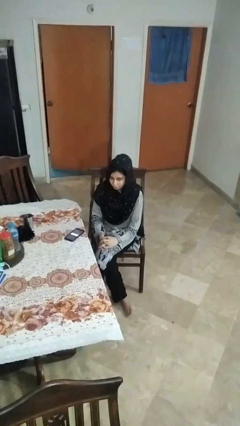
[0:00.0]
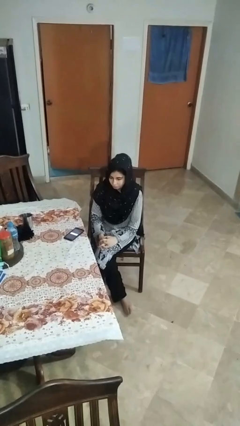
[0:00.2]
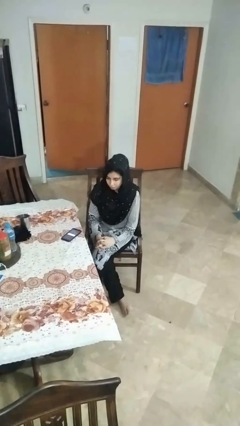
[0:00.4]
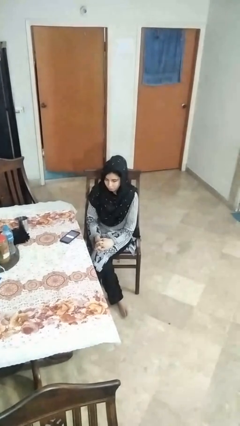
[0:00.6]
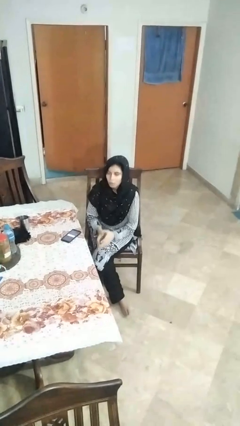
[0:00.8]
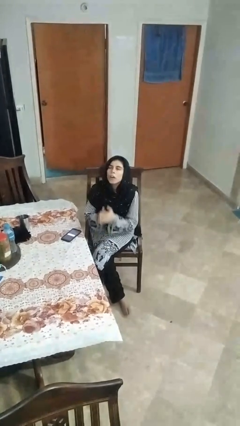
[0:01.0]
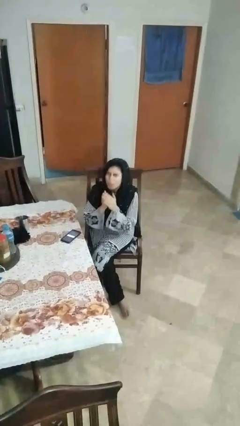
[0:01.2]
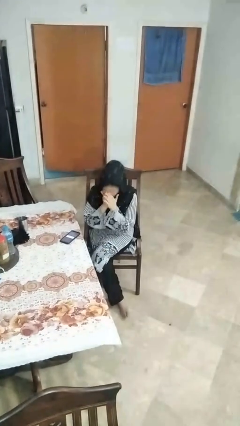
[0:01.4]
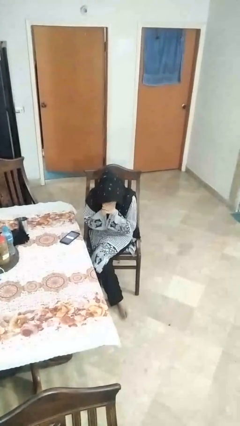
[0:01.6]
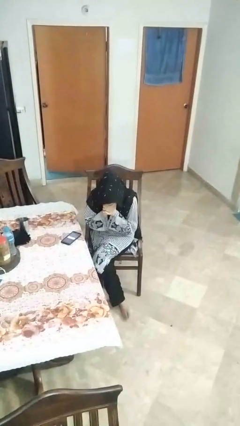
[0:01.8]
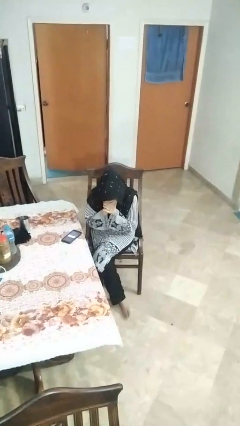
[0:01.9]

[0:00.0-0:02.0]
person sneezes into hand

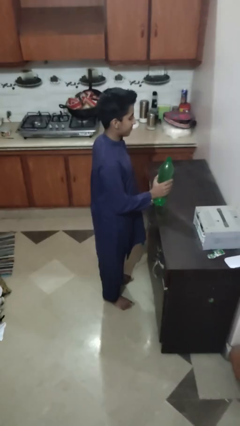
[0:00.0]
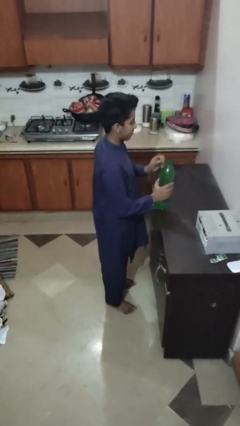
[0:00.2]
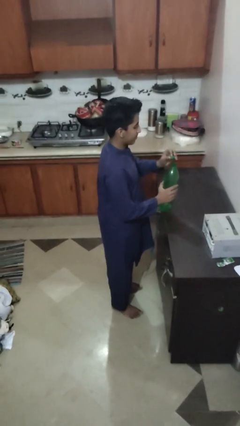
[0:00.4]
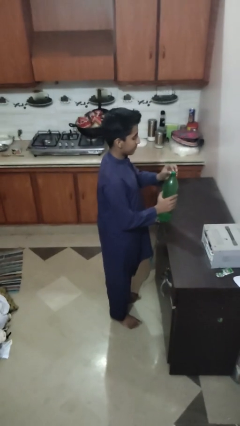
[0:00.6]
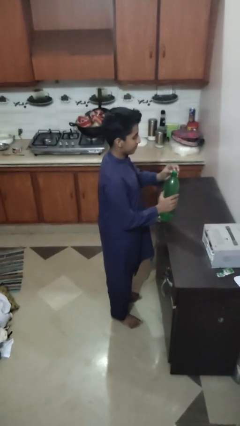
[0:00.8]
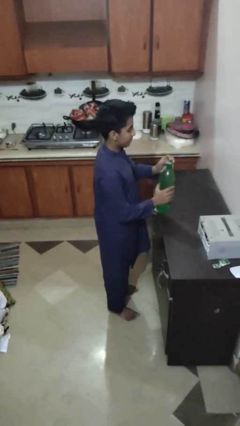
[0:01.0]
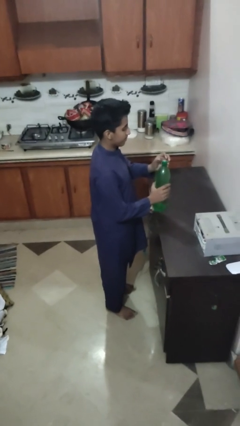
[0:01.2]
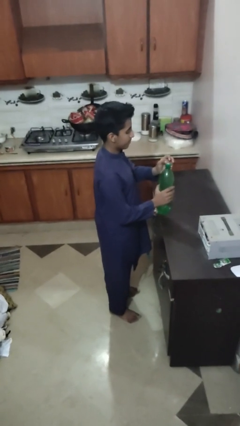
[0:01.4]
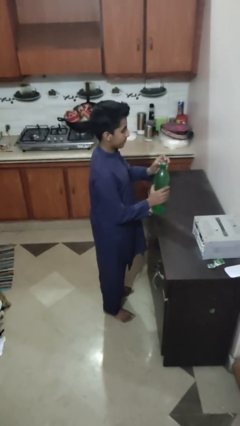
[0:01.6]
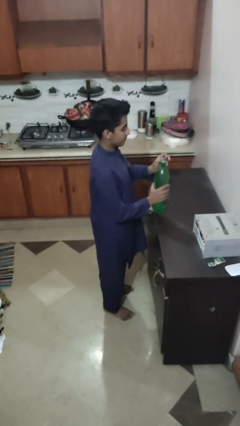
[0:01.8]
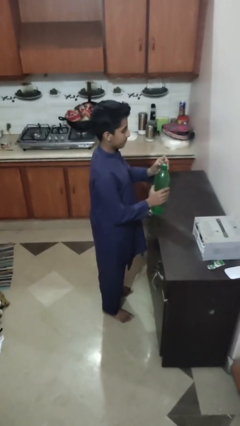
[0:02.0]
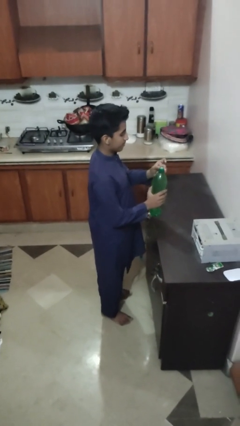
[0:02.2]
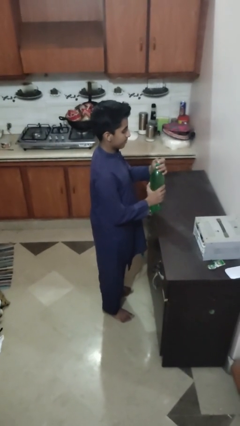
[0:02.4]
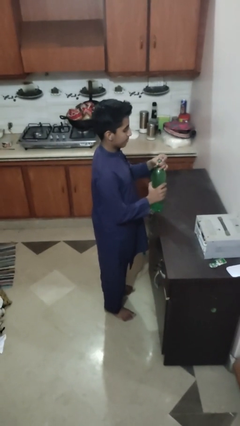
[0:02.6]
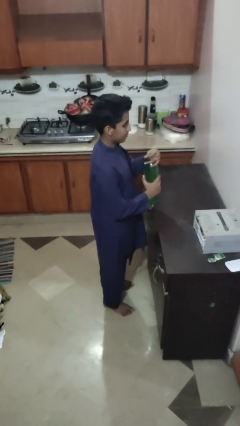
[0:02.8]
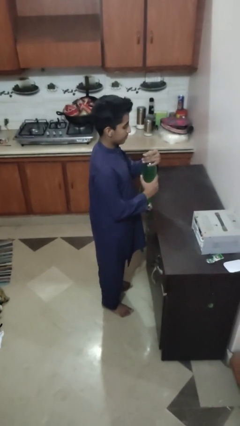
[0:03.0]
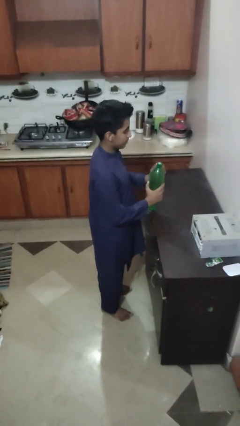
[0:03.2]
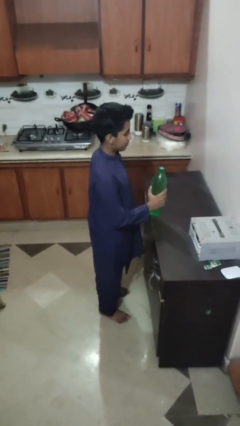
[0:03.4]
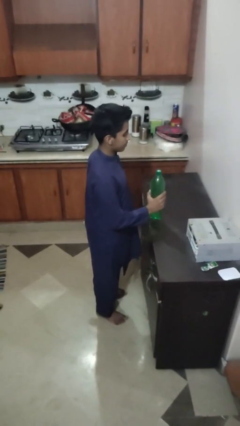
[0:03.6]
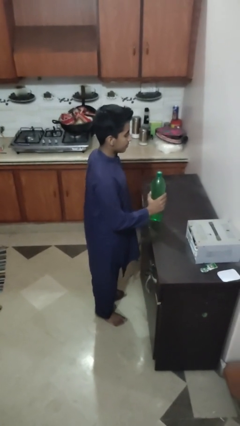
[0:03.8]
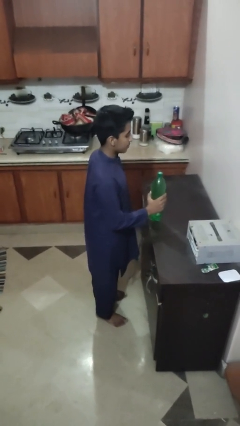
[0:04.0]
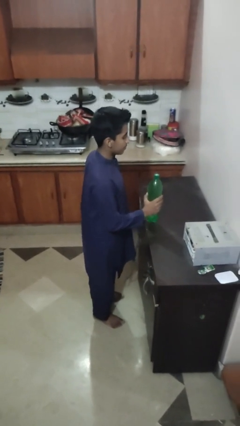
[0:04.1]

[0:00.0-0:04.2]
person screws lid to bottle

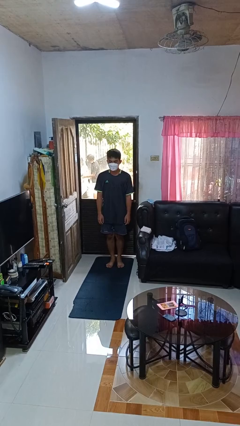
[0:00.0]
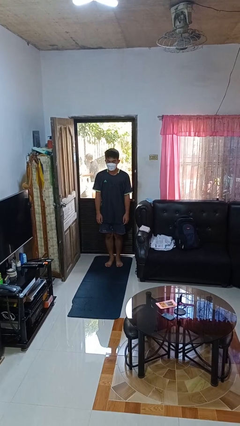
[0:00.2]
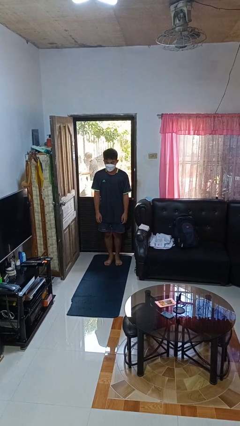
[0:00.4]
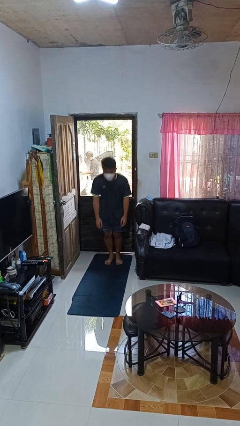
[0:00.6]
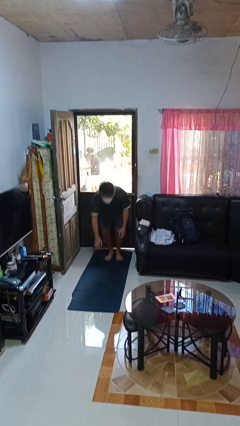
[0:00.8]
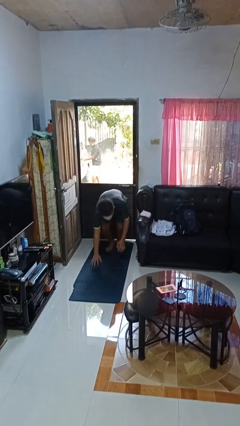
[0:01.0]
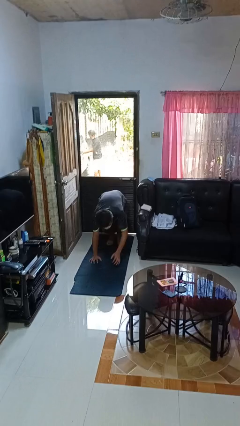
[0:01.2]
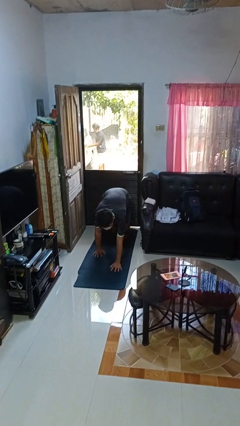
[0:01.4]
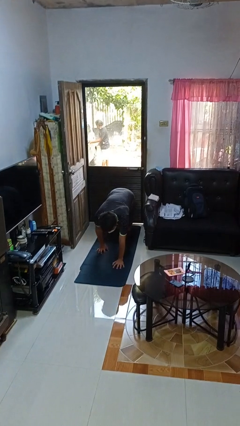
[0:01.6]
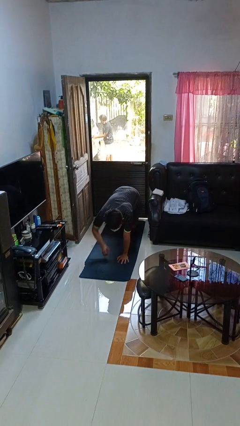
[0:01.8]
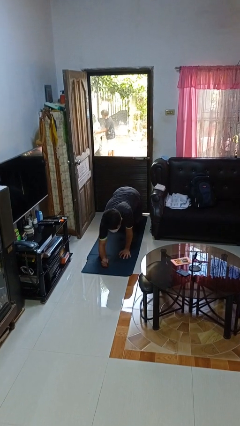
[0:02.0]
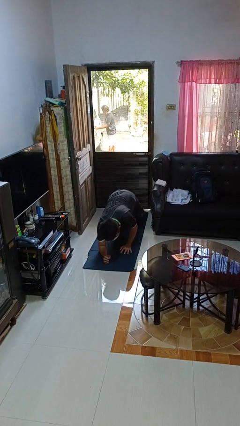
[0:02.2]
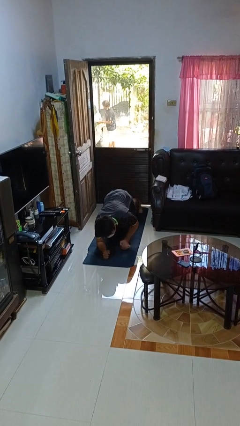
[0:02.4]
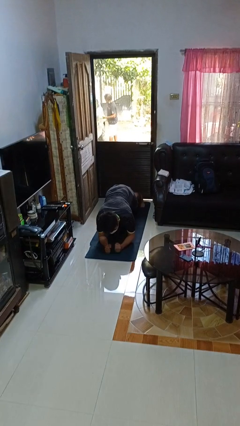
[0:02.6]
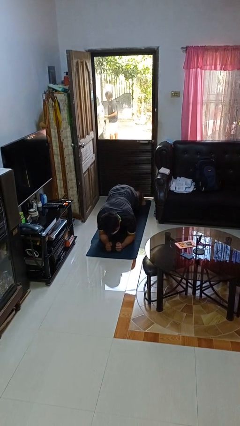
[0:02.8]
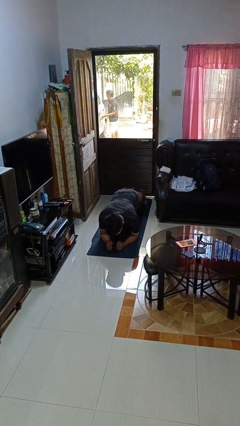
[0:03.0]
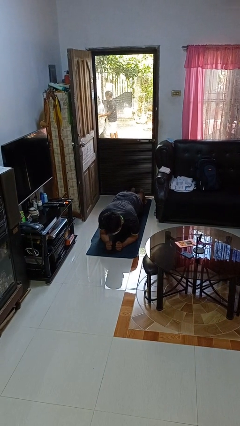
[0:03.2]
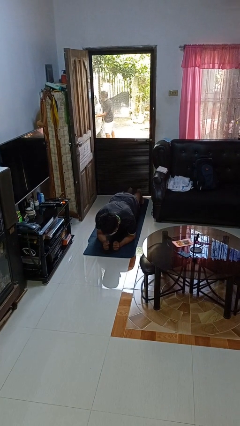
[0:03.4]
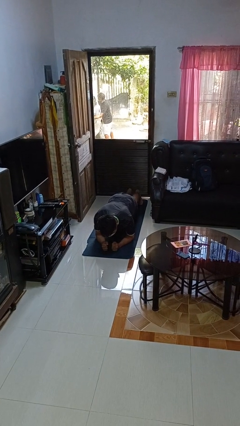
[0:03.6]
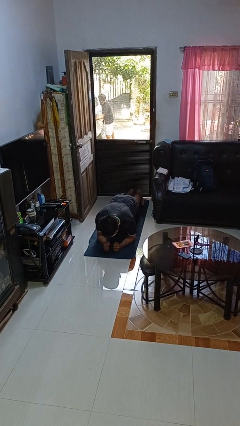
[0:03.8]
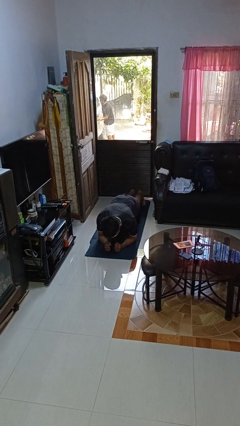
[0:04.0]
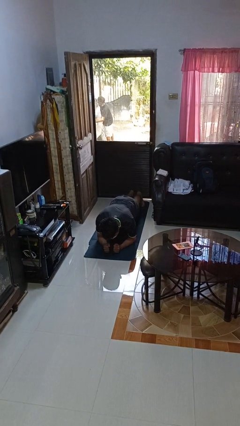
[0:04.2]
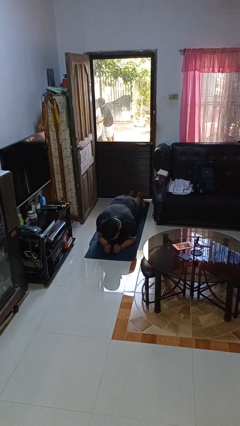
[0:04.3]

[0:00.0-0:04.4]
person exercises with plank

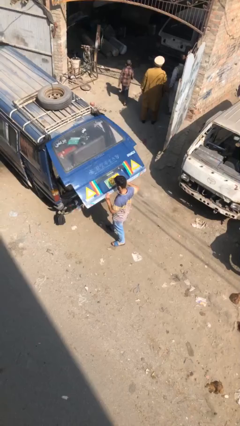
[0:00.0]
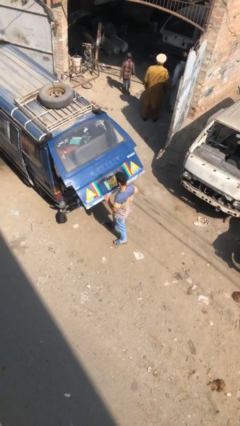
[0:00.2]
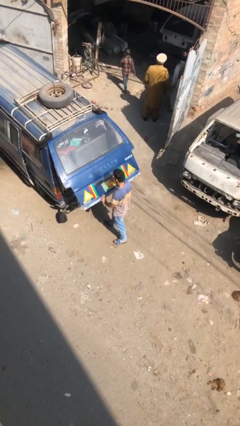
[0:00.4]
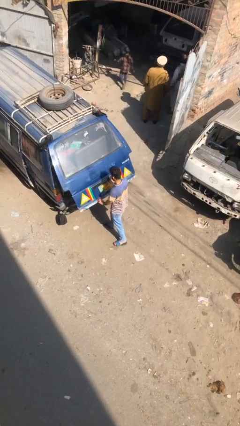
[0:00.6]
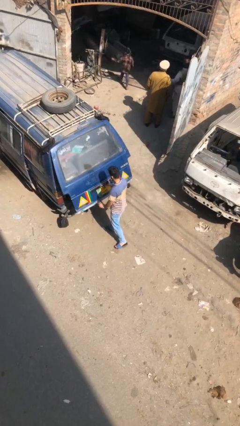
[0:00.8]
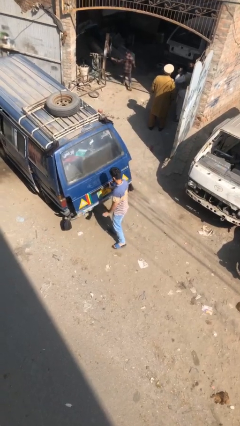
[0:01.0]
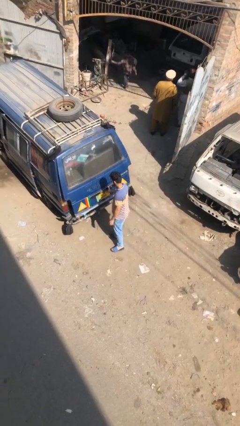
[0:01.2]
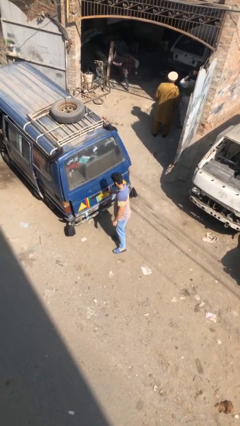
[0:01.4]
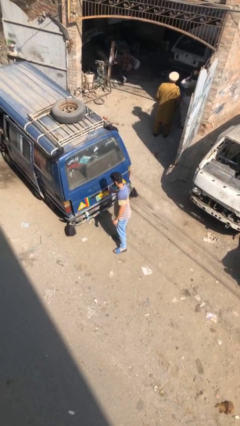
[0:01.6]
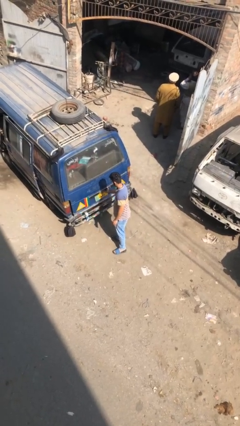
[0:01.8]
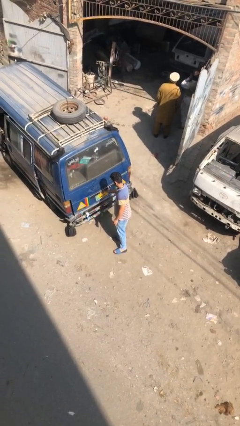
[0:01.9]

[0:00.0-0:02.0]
person closes car trunk

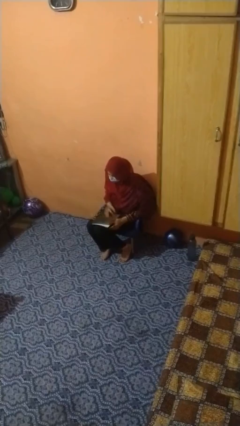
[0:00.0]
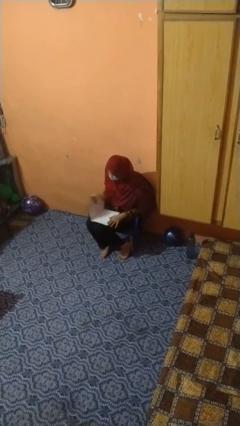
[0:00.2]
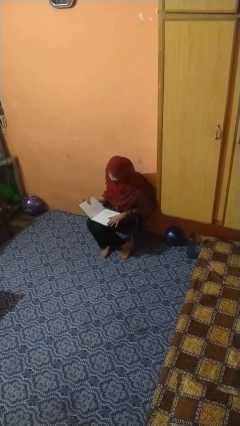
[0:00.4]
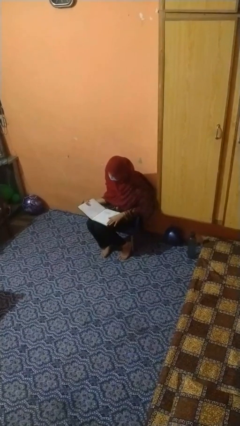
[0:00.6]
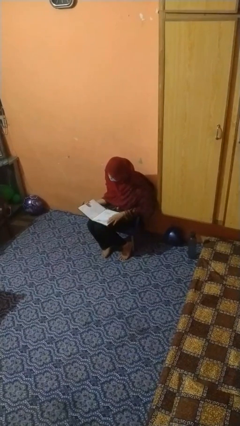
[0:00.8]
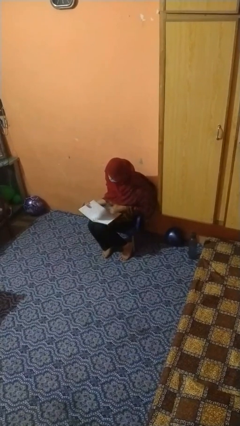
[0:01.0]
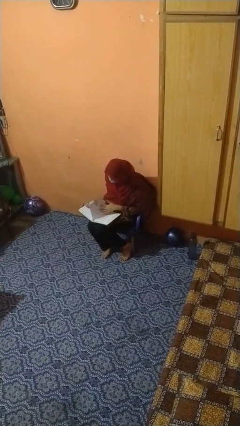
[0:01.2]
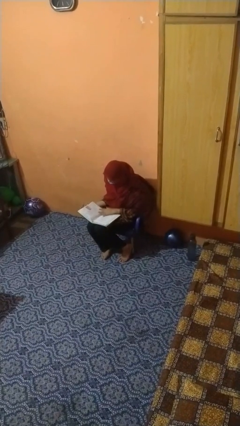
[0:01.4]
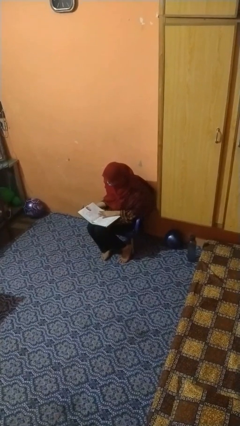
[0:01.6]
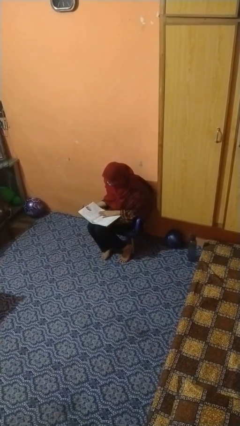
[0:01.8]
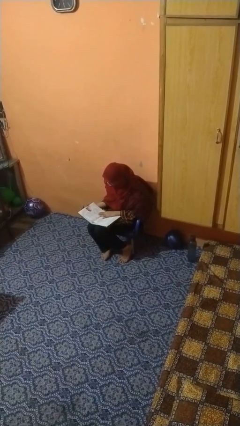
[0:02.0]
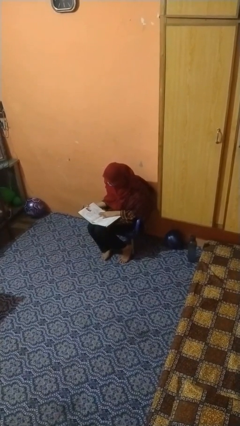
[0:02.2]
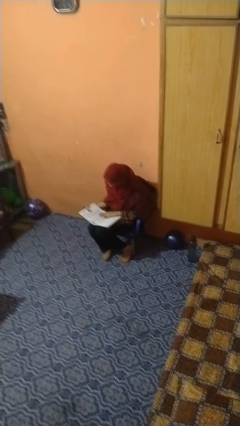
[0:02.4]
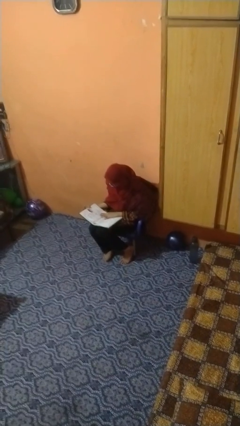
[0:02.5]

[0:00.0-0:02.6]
person reads book

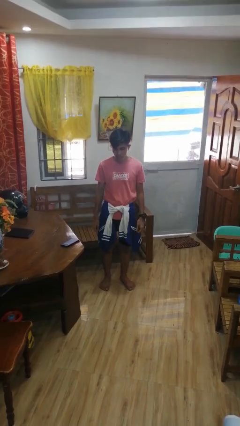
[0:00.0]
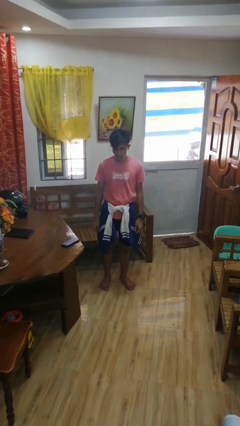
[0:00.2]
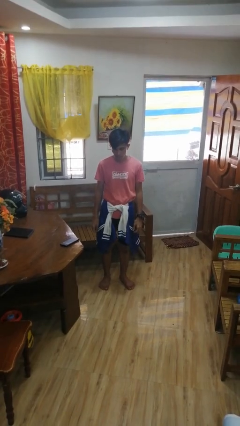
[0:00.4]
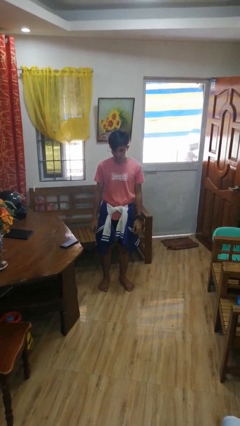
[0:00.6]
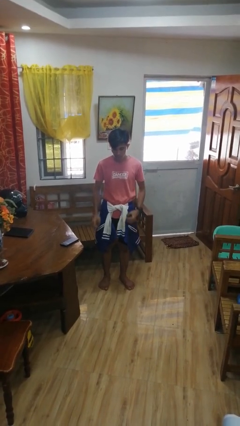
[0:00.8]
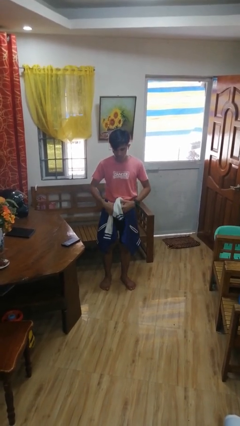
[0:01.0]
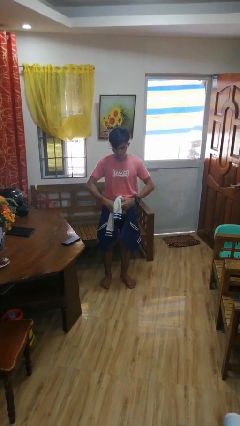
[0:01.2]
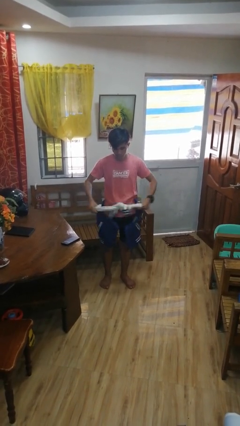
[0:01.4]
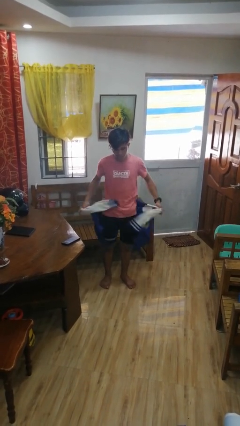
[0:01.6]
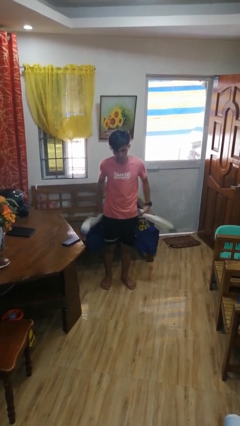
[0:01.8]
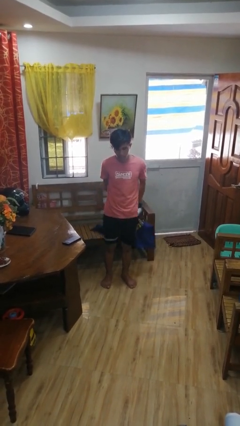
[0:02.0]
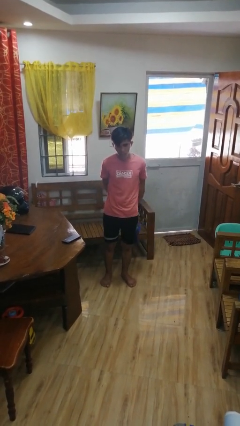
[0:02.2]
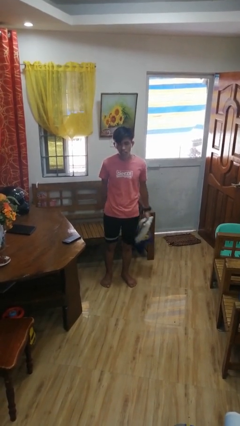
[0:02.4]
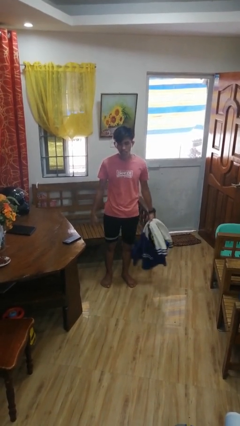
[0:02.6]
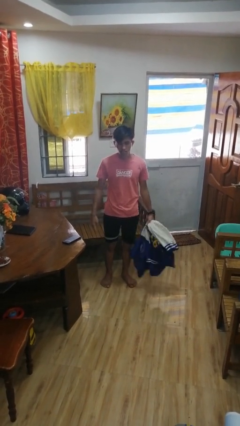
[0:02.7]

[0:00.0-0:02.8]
person unties jacket around waist
